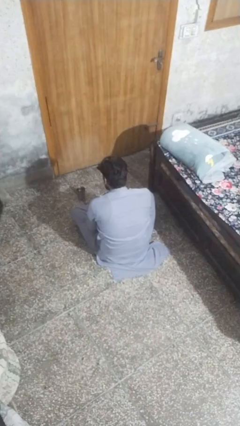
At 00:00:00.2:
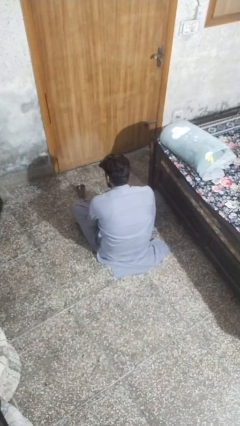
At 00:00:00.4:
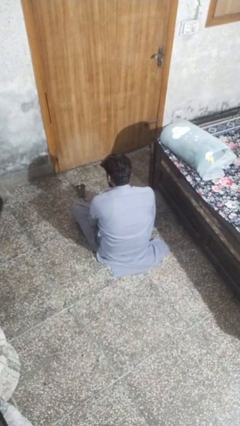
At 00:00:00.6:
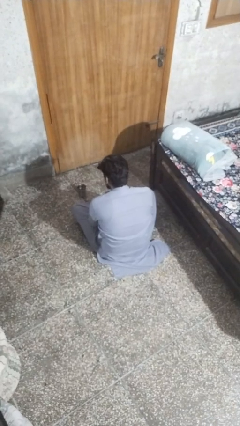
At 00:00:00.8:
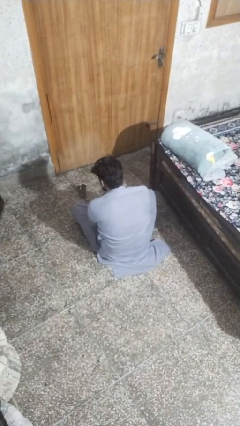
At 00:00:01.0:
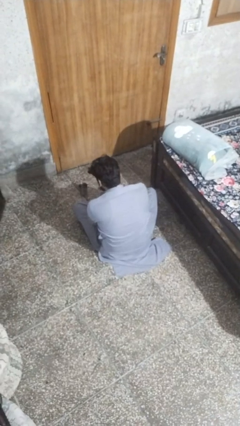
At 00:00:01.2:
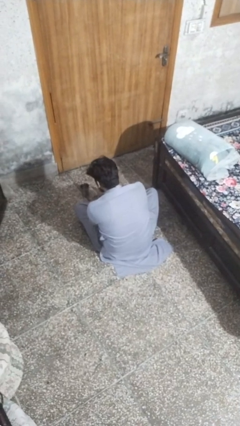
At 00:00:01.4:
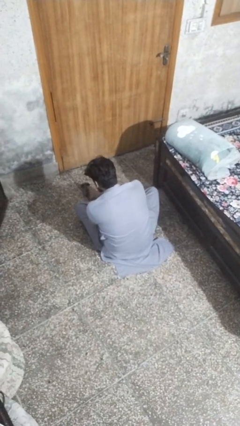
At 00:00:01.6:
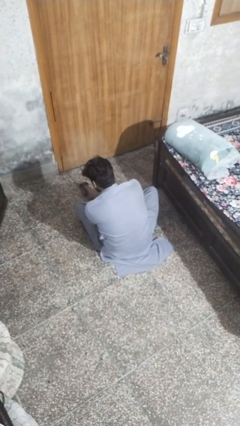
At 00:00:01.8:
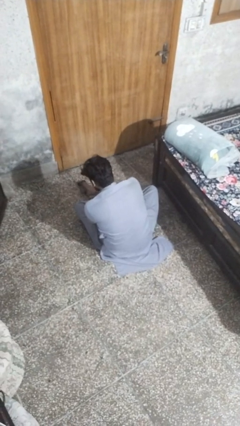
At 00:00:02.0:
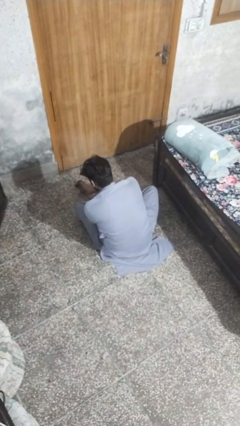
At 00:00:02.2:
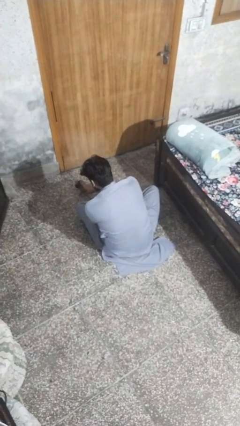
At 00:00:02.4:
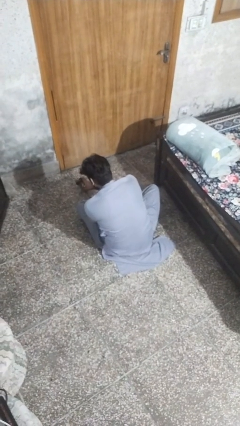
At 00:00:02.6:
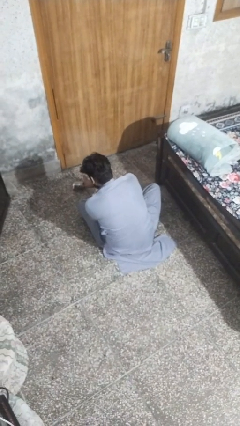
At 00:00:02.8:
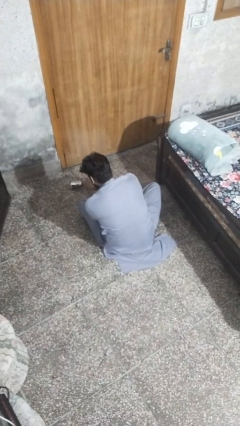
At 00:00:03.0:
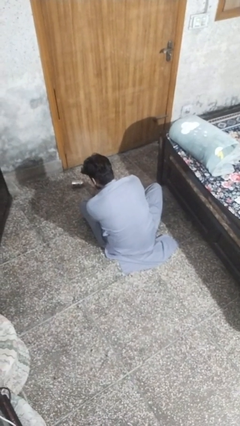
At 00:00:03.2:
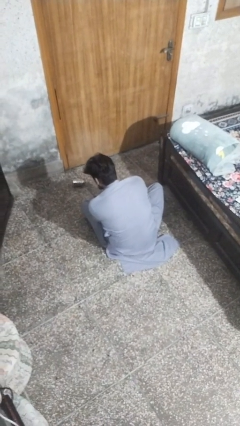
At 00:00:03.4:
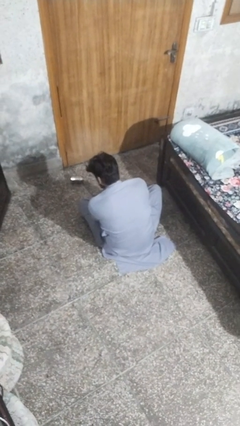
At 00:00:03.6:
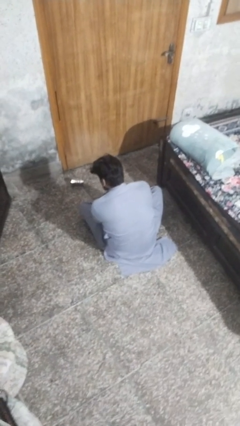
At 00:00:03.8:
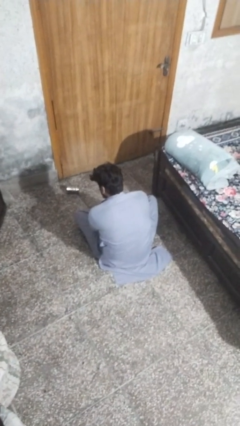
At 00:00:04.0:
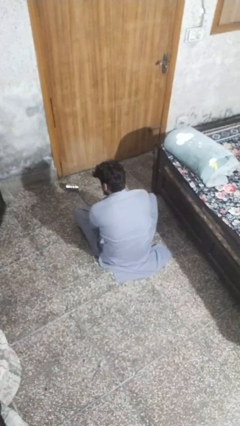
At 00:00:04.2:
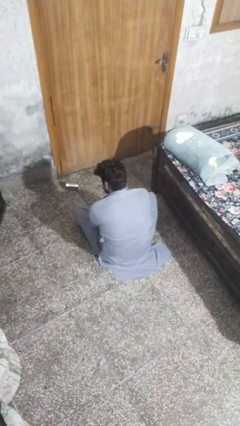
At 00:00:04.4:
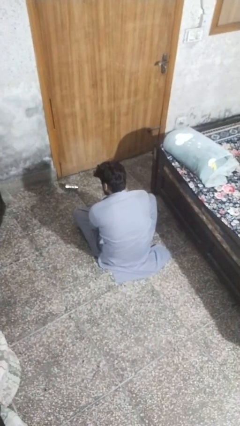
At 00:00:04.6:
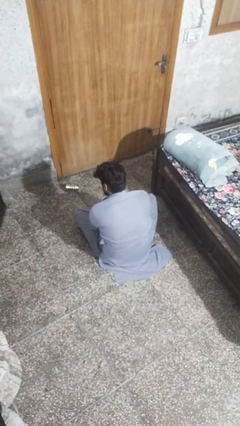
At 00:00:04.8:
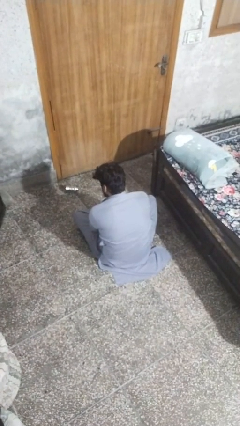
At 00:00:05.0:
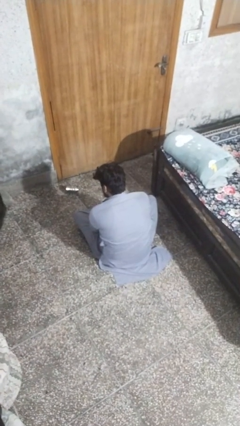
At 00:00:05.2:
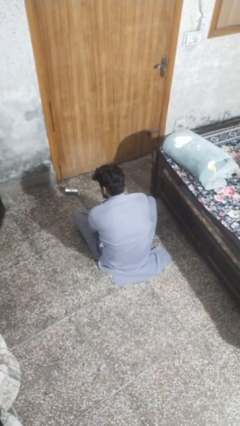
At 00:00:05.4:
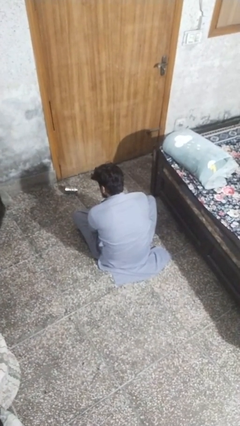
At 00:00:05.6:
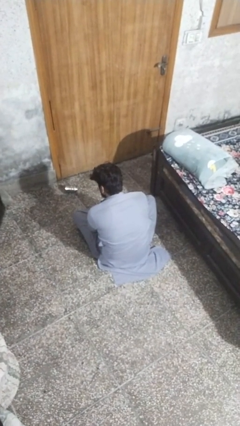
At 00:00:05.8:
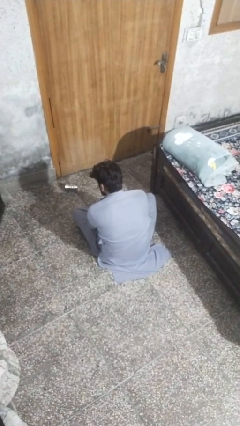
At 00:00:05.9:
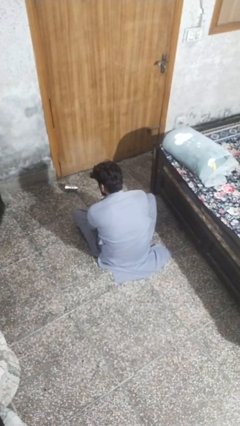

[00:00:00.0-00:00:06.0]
person spills on floor

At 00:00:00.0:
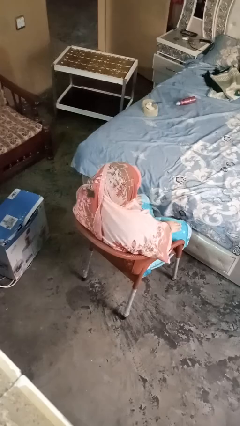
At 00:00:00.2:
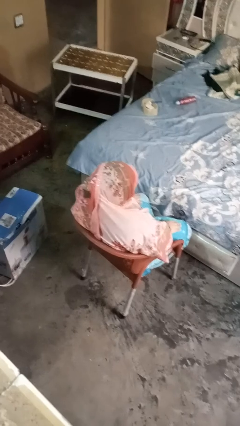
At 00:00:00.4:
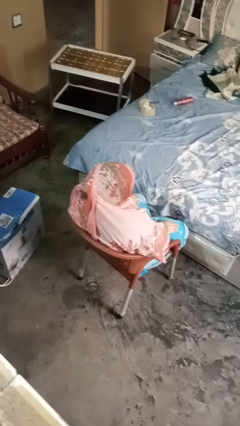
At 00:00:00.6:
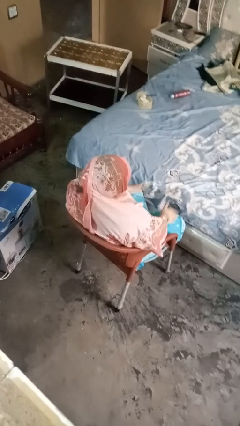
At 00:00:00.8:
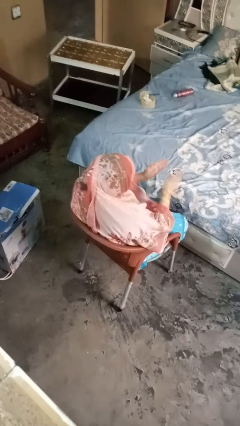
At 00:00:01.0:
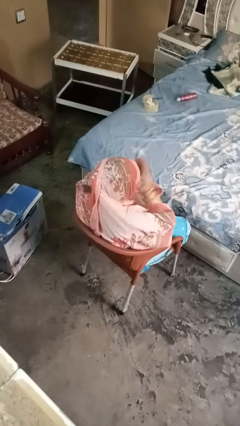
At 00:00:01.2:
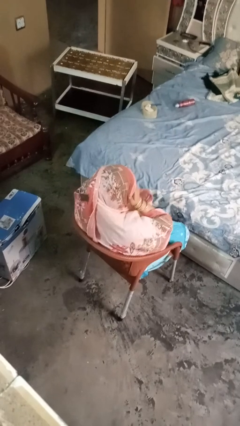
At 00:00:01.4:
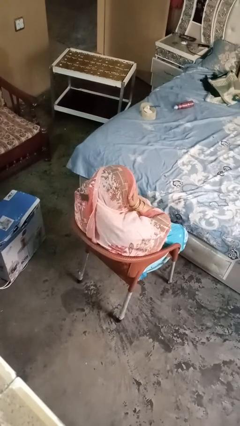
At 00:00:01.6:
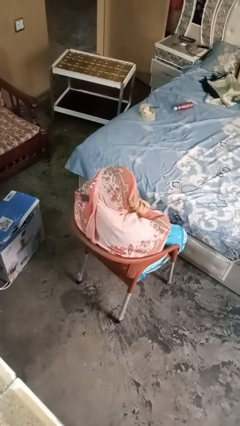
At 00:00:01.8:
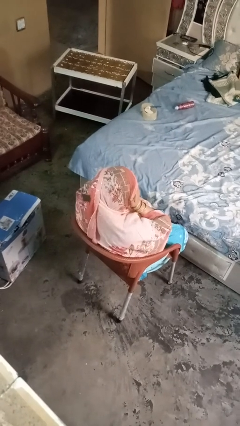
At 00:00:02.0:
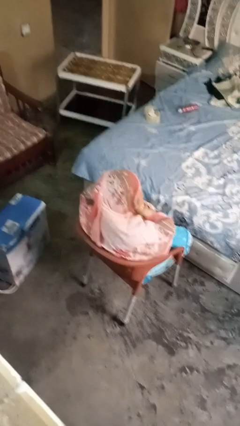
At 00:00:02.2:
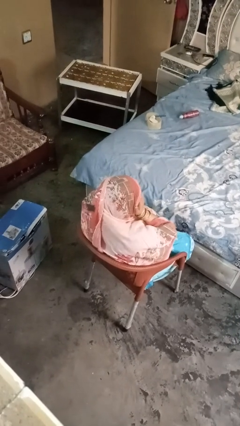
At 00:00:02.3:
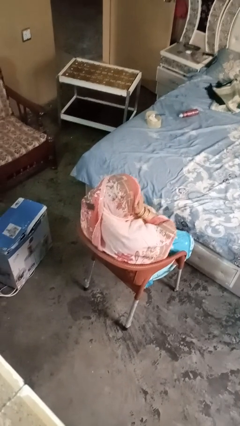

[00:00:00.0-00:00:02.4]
person covers face with hands

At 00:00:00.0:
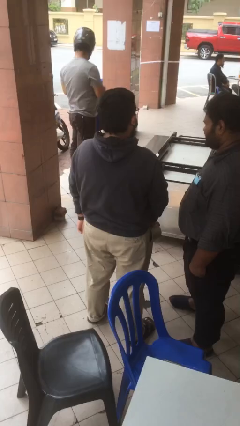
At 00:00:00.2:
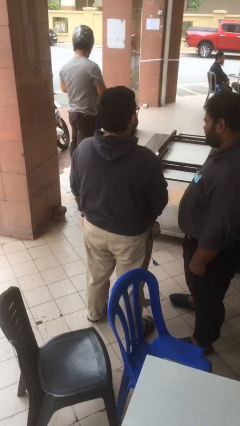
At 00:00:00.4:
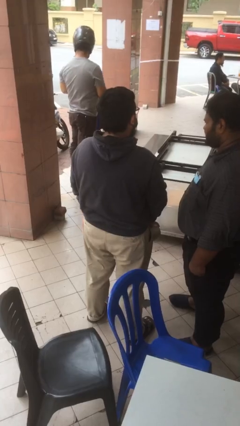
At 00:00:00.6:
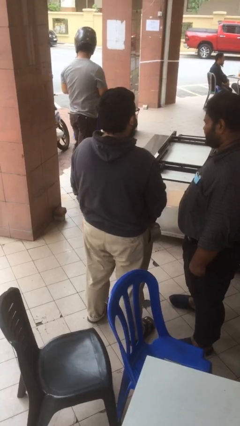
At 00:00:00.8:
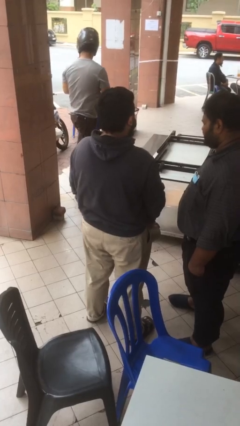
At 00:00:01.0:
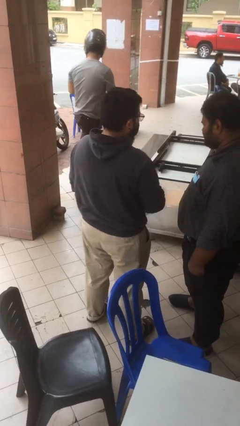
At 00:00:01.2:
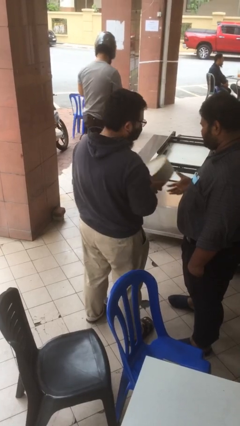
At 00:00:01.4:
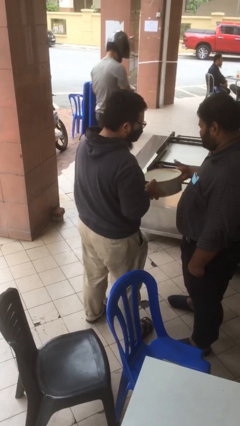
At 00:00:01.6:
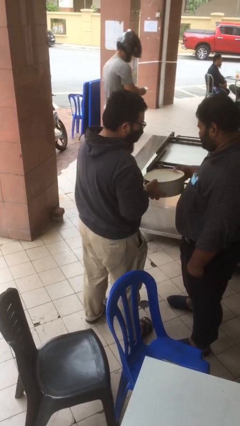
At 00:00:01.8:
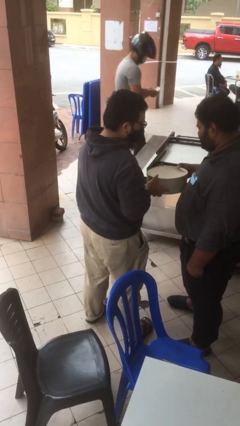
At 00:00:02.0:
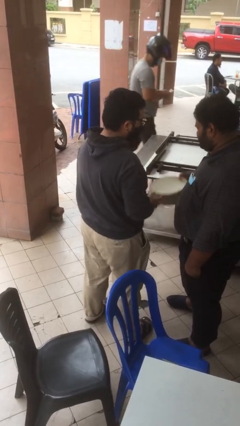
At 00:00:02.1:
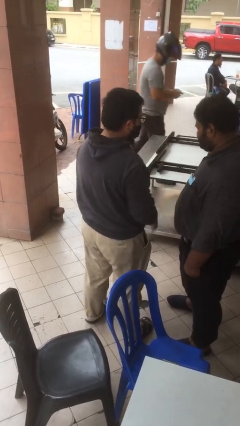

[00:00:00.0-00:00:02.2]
person transfers object to person

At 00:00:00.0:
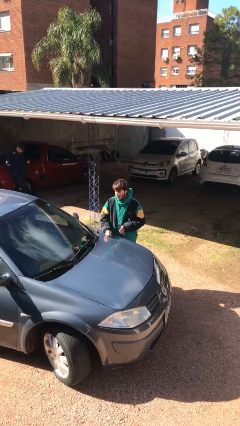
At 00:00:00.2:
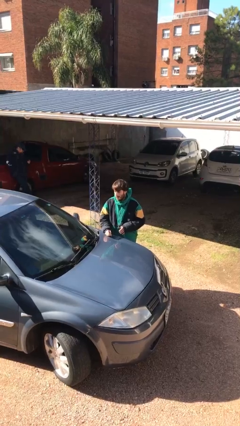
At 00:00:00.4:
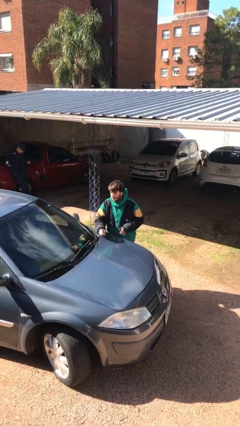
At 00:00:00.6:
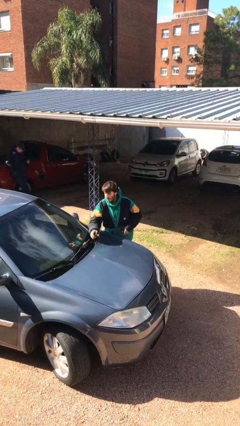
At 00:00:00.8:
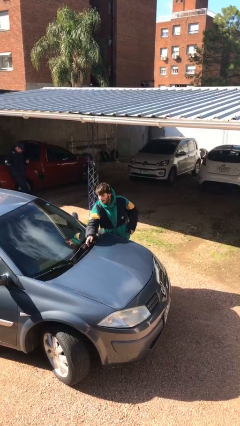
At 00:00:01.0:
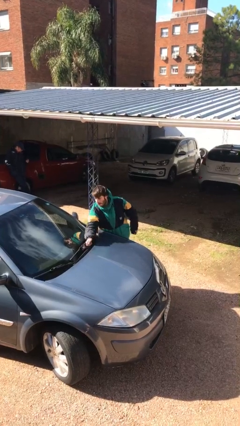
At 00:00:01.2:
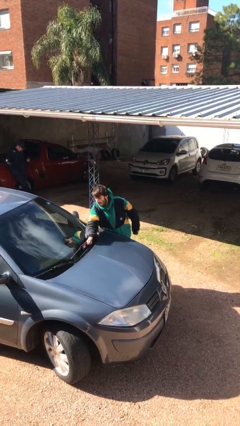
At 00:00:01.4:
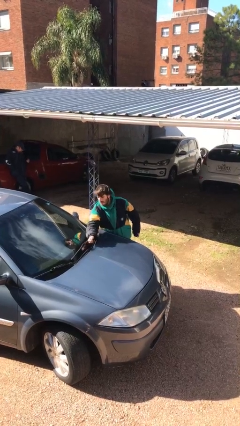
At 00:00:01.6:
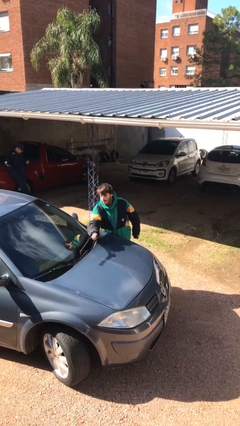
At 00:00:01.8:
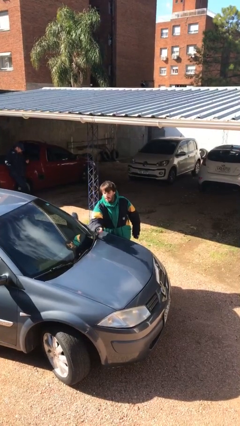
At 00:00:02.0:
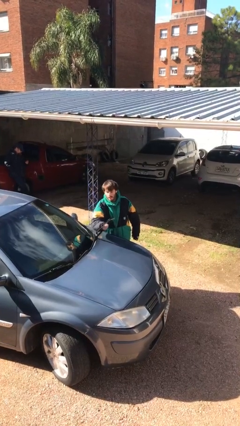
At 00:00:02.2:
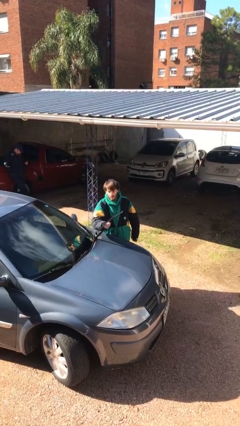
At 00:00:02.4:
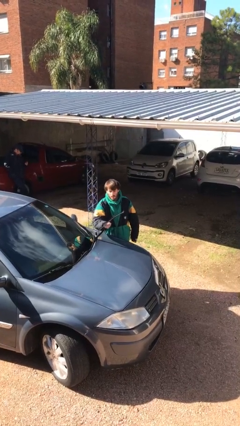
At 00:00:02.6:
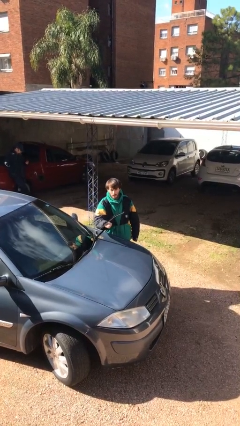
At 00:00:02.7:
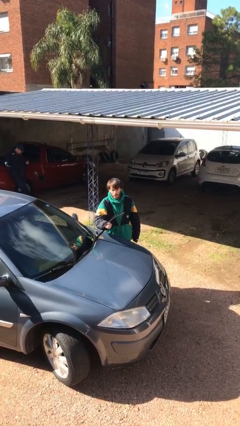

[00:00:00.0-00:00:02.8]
person flips up car wipers

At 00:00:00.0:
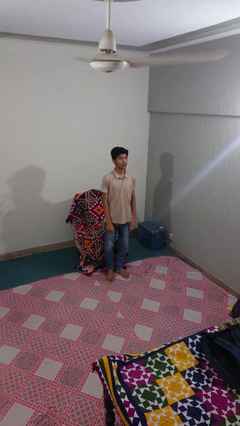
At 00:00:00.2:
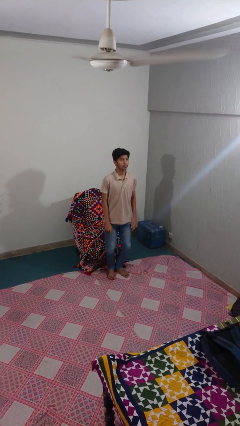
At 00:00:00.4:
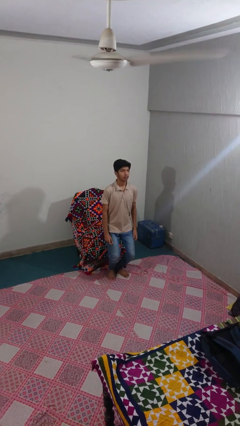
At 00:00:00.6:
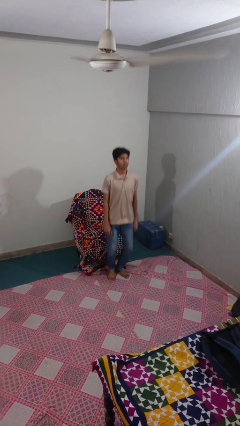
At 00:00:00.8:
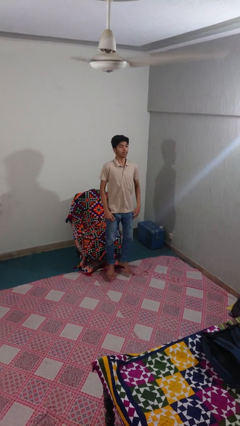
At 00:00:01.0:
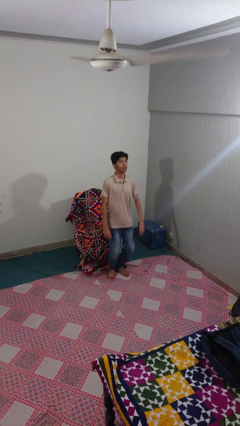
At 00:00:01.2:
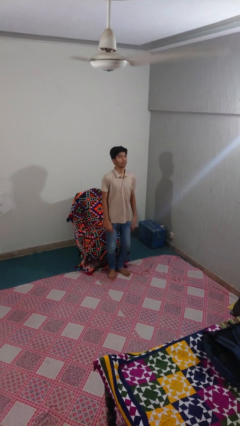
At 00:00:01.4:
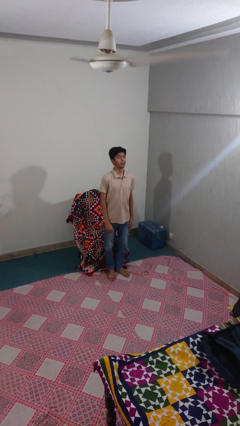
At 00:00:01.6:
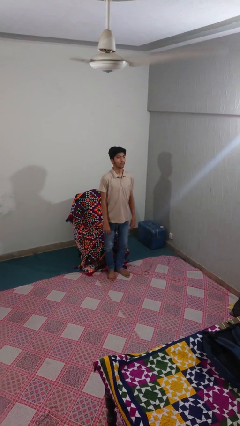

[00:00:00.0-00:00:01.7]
person jumps

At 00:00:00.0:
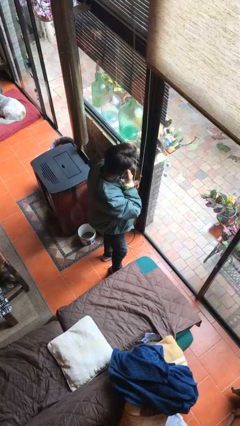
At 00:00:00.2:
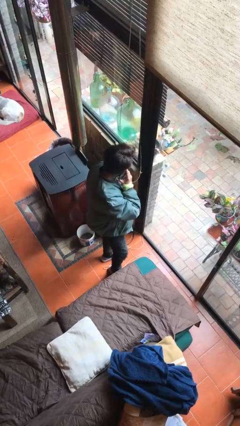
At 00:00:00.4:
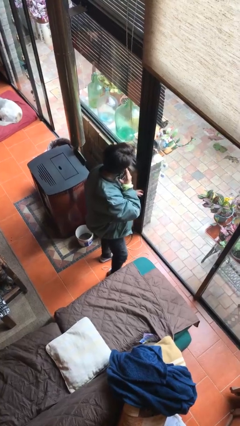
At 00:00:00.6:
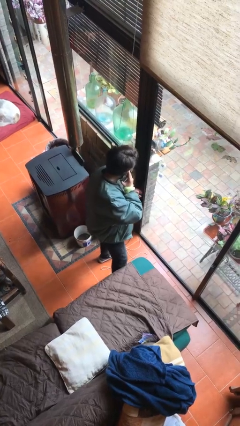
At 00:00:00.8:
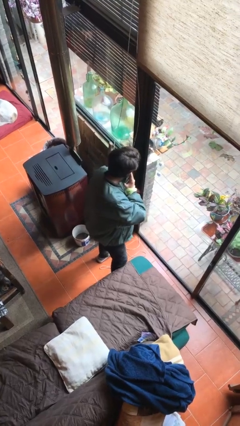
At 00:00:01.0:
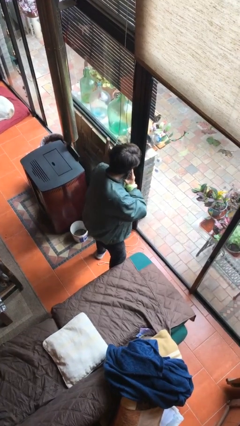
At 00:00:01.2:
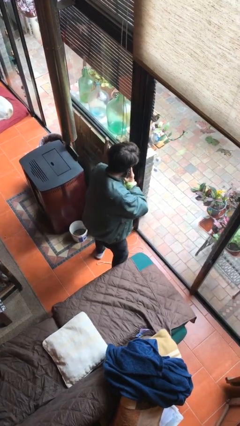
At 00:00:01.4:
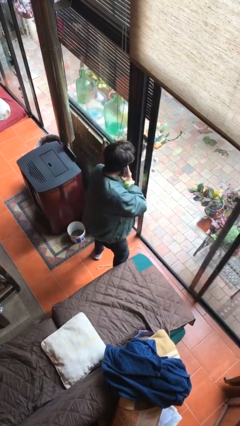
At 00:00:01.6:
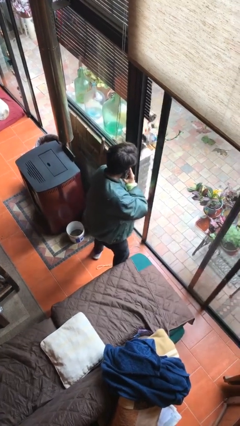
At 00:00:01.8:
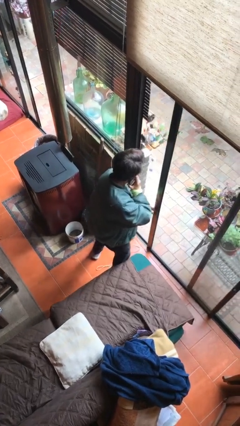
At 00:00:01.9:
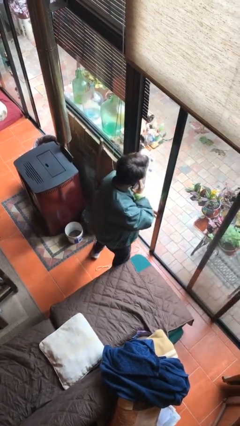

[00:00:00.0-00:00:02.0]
person opens facility door

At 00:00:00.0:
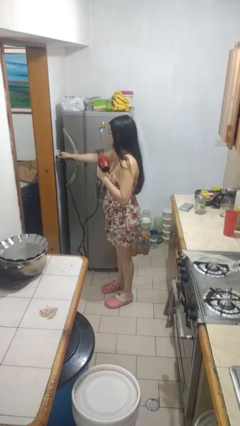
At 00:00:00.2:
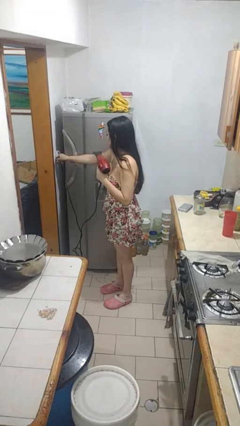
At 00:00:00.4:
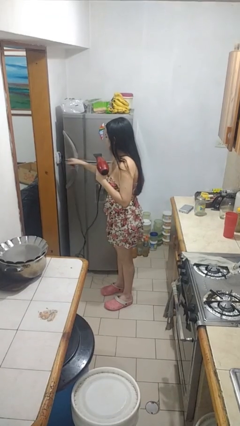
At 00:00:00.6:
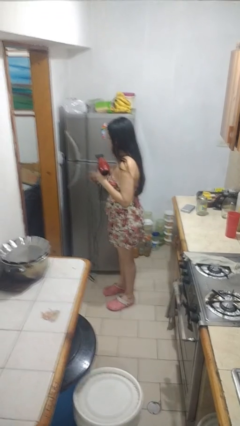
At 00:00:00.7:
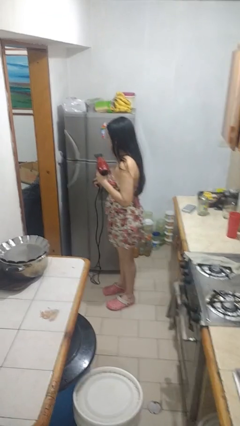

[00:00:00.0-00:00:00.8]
person unplugs from electrical socket
